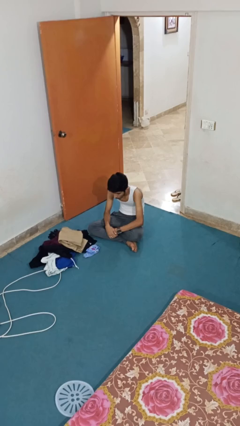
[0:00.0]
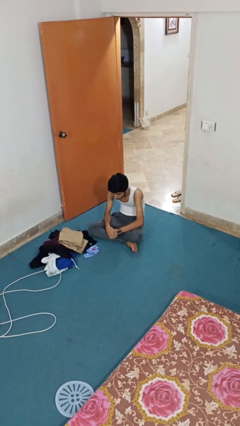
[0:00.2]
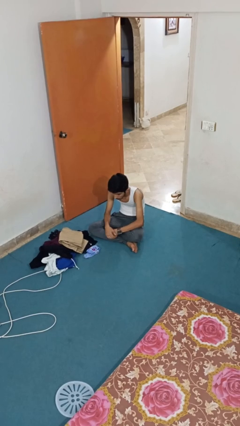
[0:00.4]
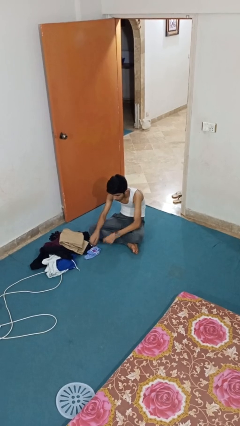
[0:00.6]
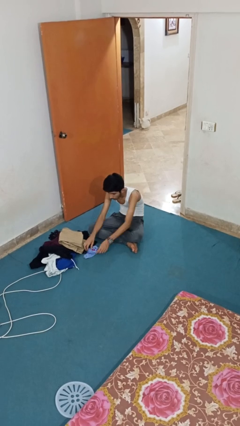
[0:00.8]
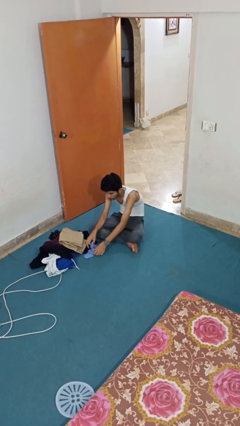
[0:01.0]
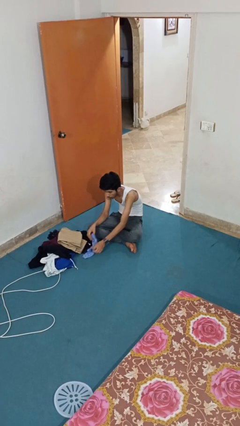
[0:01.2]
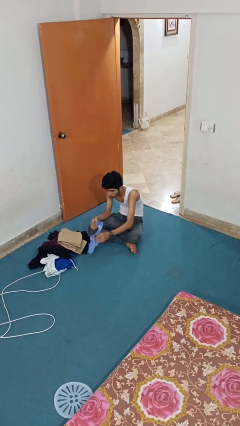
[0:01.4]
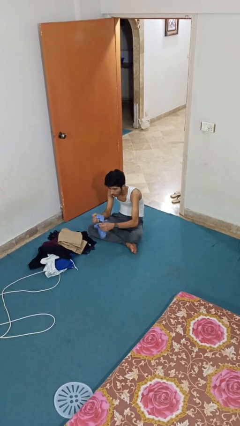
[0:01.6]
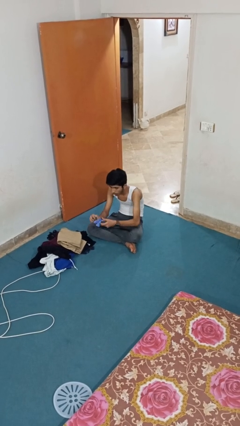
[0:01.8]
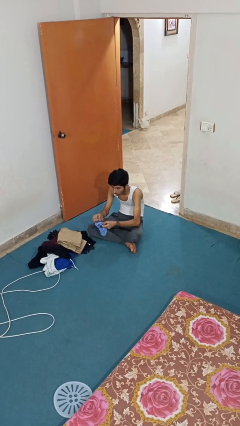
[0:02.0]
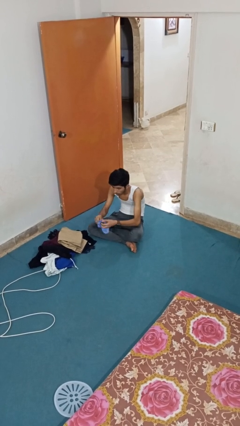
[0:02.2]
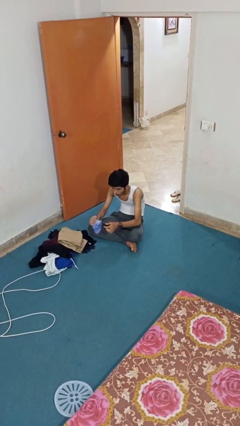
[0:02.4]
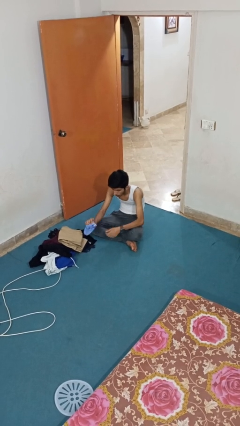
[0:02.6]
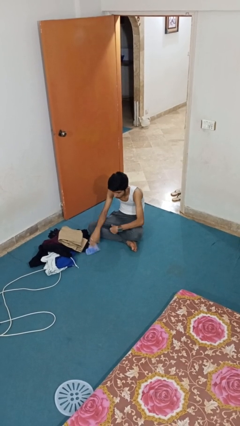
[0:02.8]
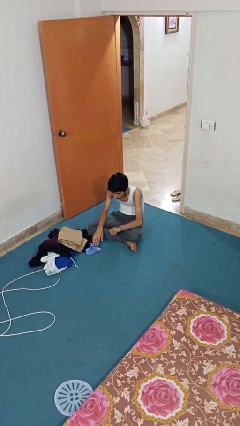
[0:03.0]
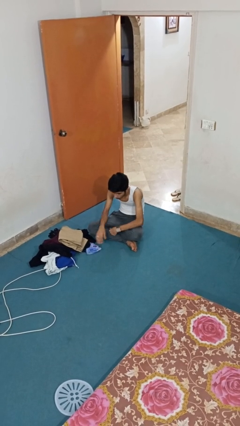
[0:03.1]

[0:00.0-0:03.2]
person folds socks

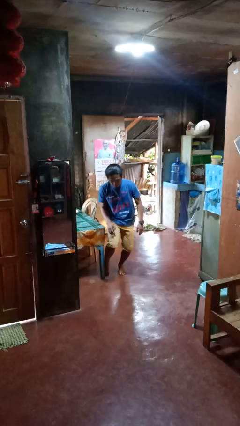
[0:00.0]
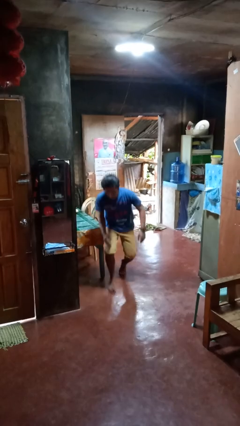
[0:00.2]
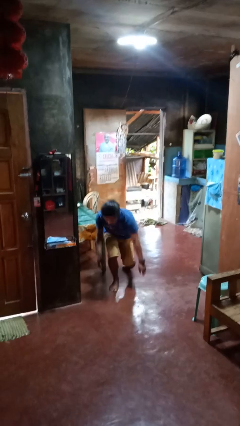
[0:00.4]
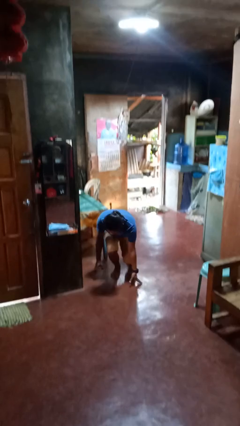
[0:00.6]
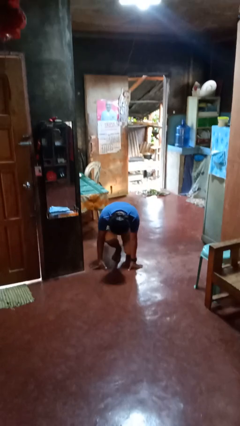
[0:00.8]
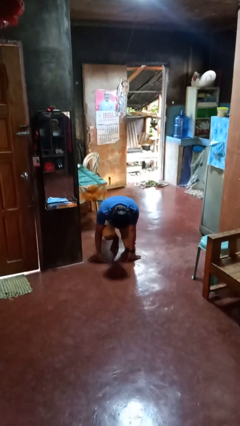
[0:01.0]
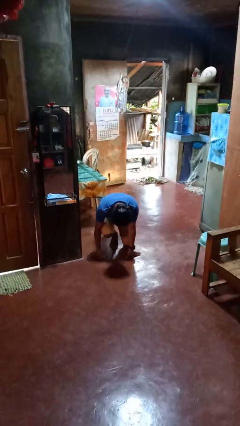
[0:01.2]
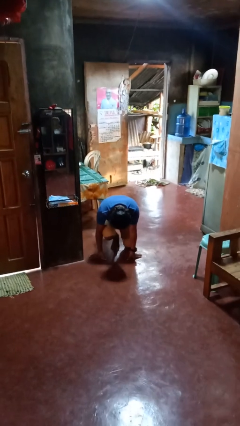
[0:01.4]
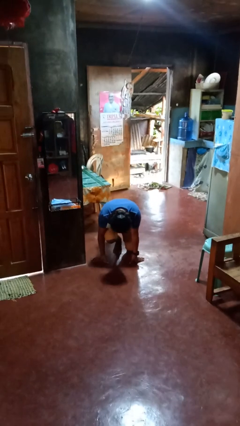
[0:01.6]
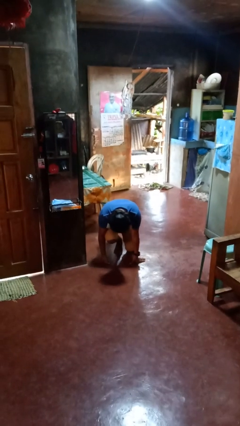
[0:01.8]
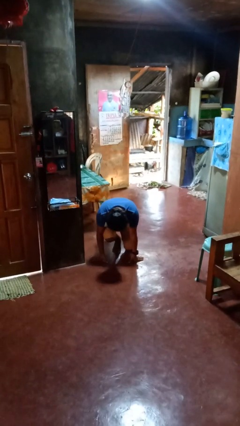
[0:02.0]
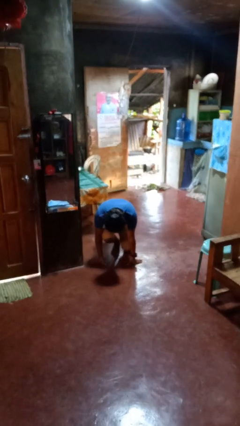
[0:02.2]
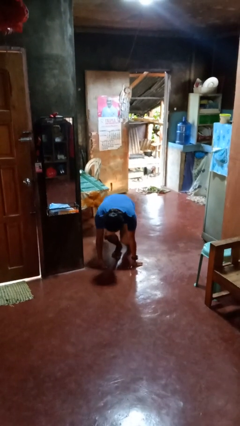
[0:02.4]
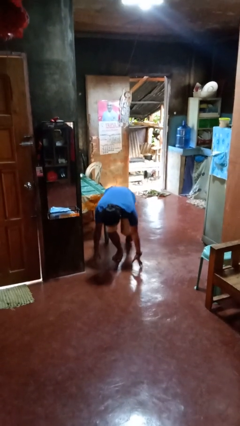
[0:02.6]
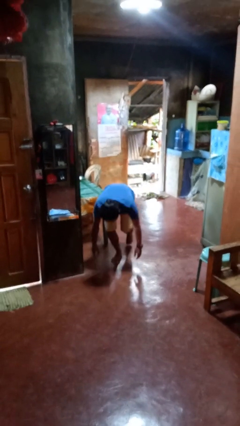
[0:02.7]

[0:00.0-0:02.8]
person trips on object on floor

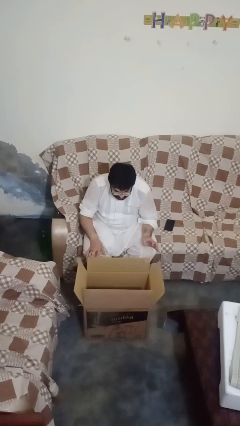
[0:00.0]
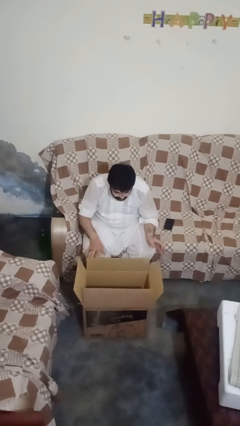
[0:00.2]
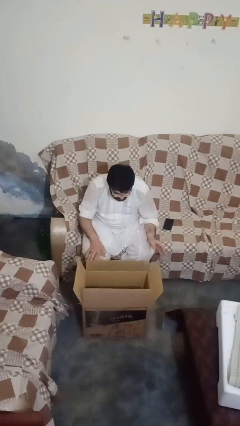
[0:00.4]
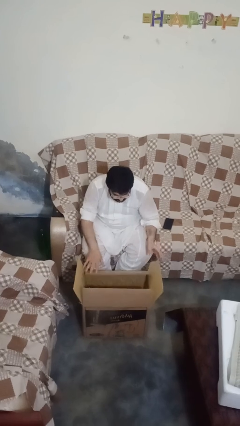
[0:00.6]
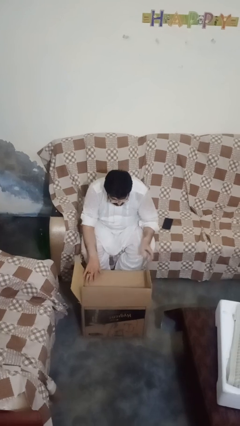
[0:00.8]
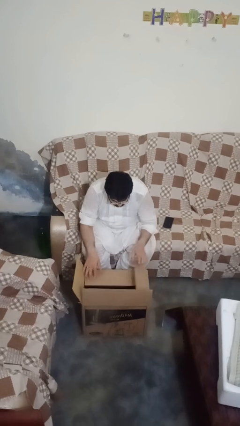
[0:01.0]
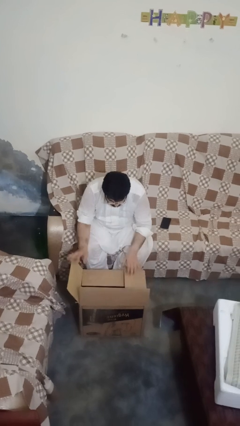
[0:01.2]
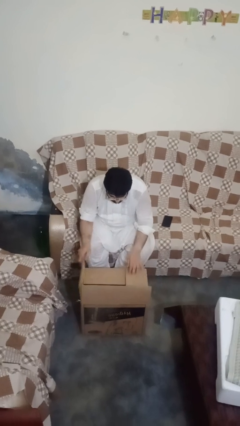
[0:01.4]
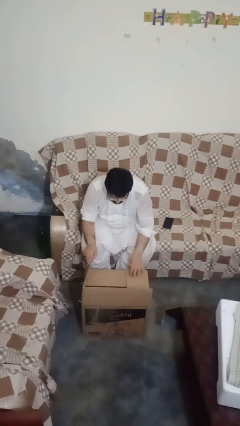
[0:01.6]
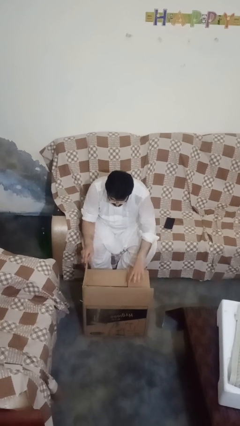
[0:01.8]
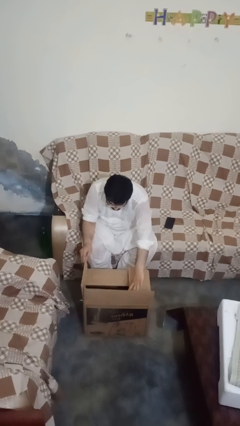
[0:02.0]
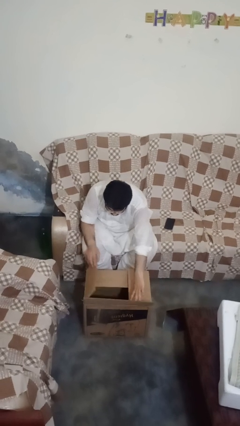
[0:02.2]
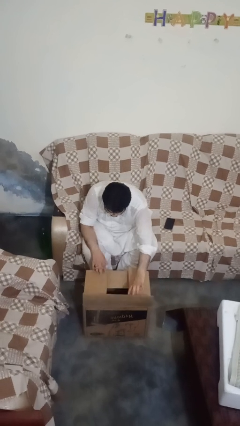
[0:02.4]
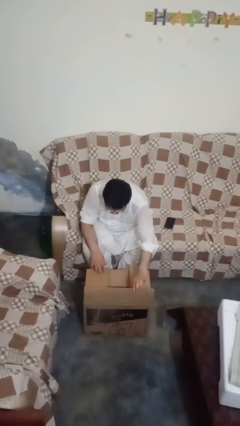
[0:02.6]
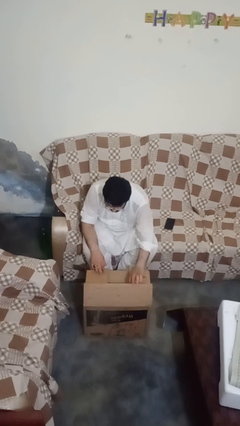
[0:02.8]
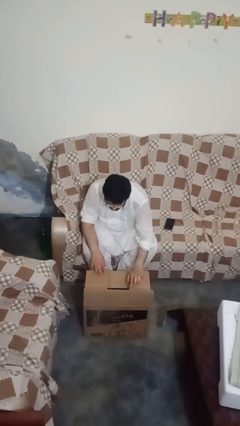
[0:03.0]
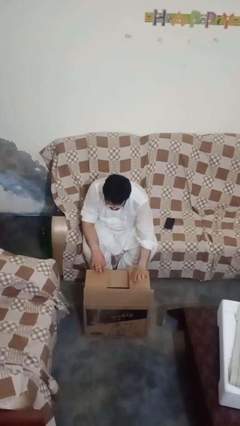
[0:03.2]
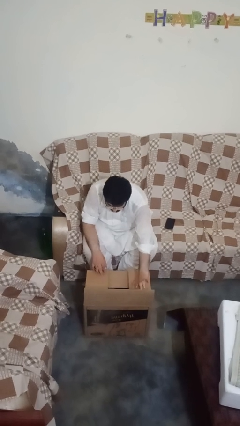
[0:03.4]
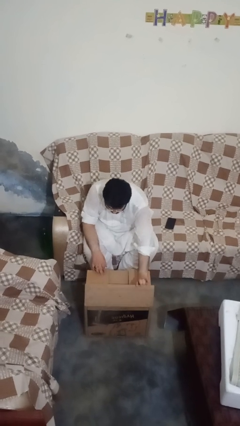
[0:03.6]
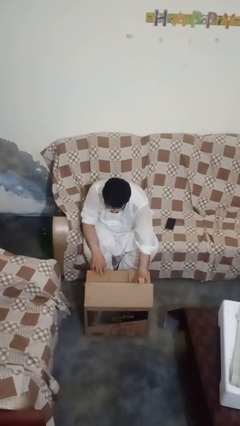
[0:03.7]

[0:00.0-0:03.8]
person closes box

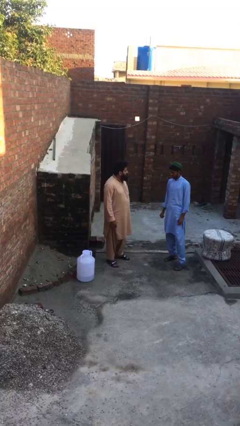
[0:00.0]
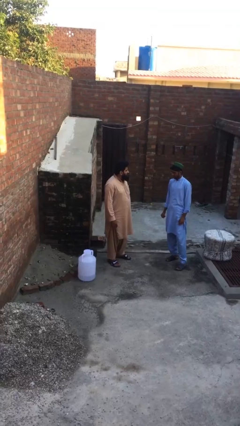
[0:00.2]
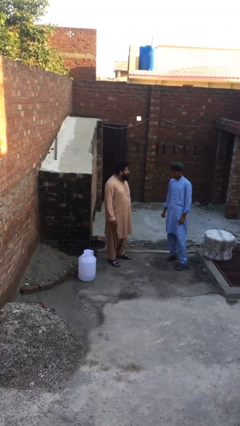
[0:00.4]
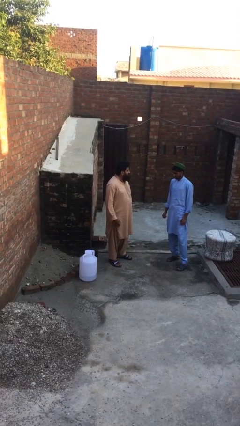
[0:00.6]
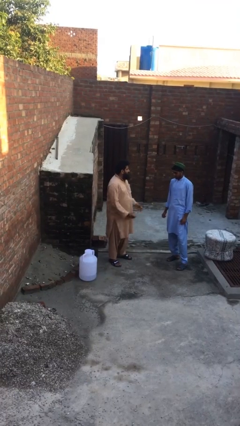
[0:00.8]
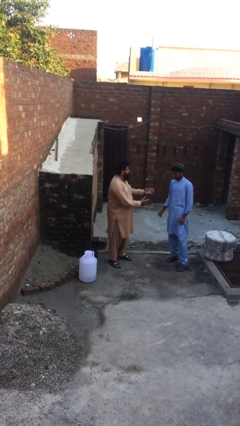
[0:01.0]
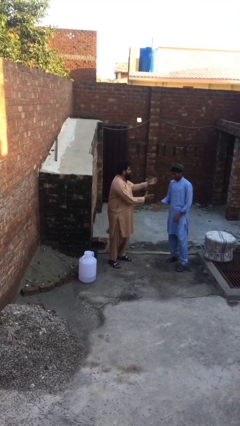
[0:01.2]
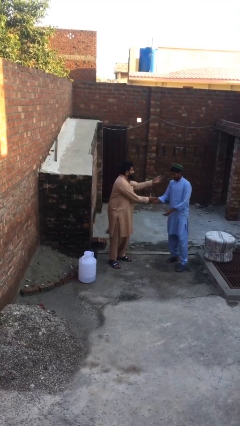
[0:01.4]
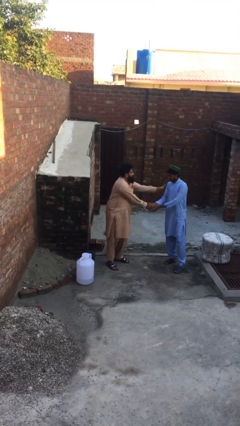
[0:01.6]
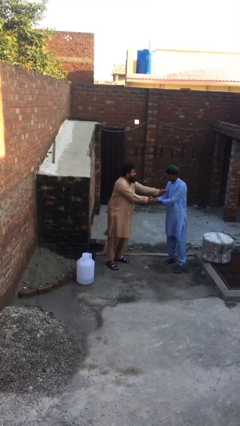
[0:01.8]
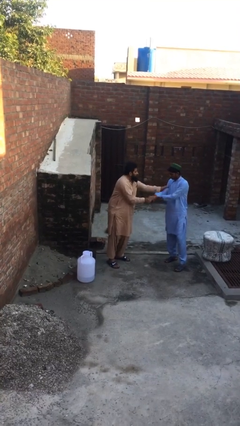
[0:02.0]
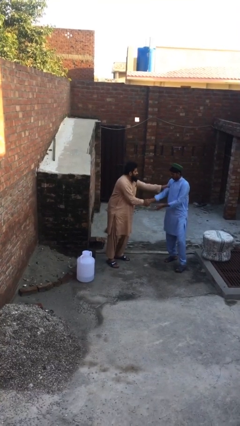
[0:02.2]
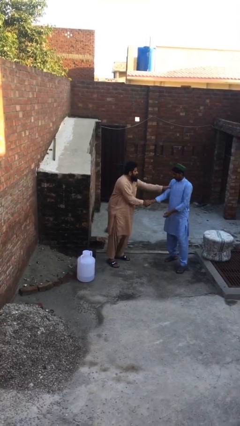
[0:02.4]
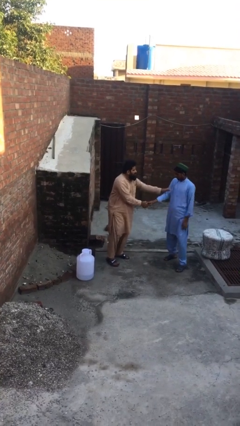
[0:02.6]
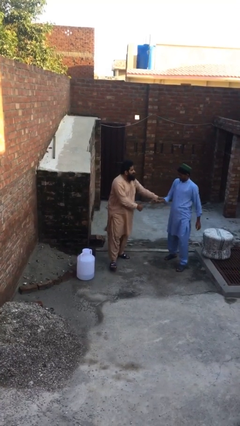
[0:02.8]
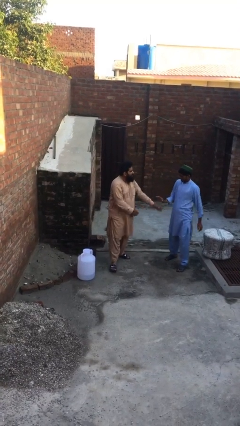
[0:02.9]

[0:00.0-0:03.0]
person shakes hand

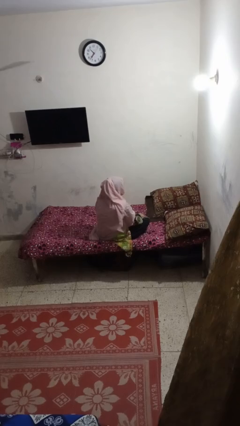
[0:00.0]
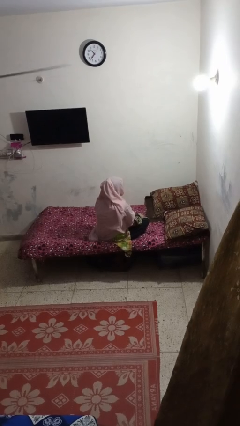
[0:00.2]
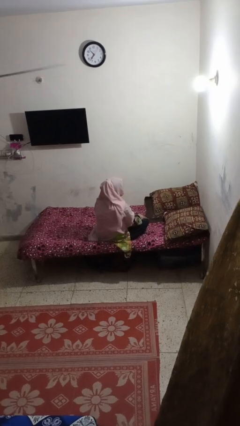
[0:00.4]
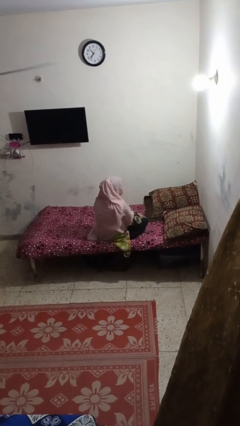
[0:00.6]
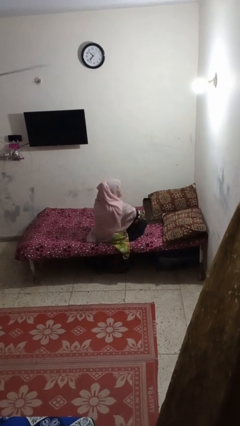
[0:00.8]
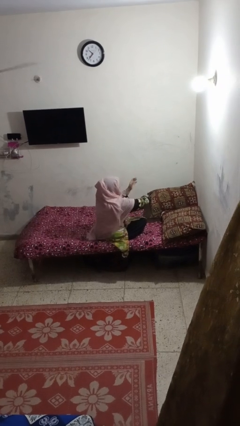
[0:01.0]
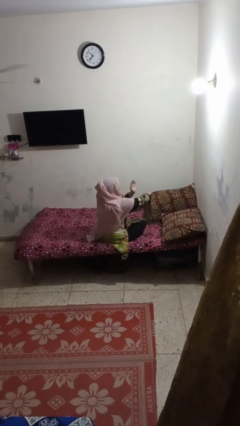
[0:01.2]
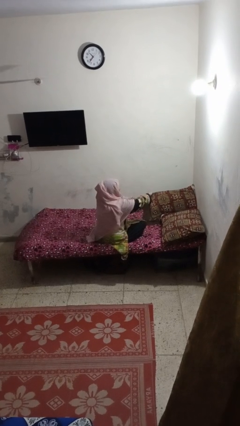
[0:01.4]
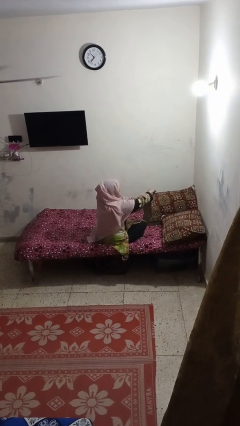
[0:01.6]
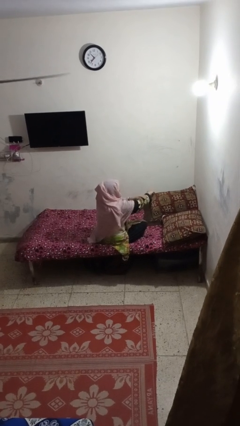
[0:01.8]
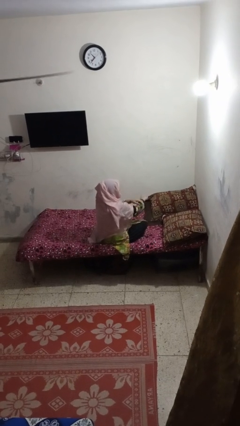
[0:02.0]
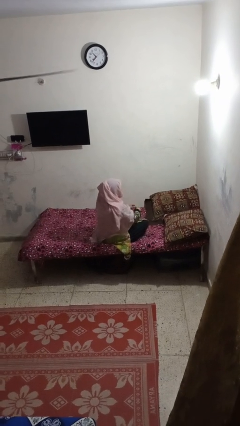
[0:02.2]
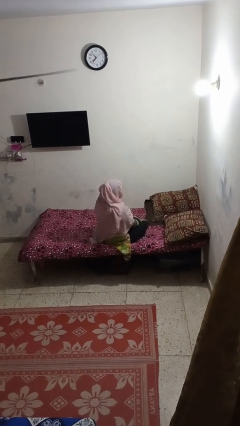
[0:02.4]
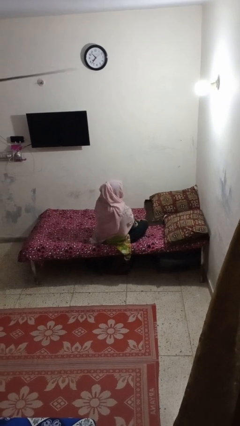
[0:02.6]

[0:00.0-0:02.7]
person swats bug

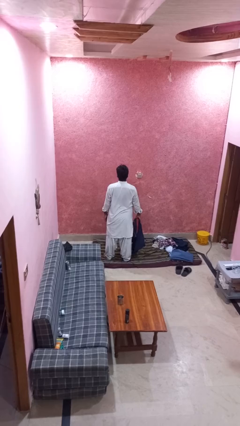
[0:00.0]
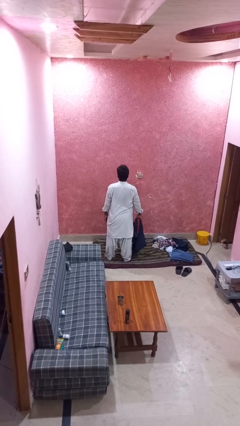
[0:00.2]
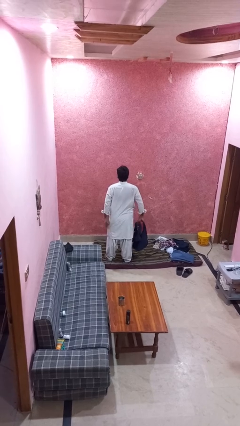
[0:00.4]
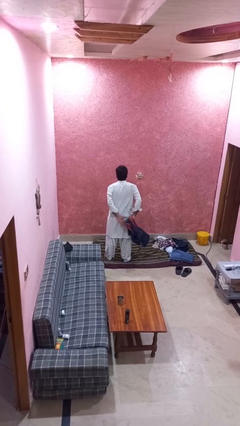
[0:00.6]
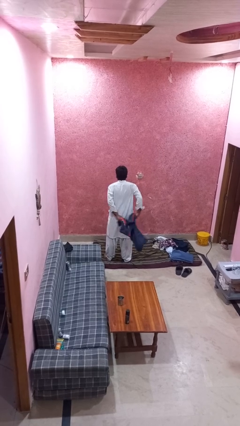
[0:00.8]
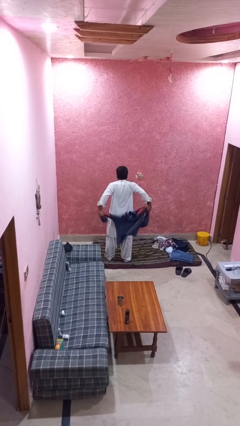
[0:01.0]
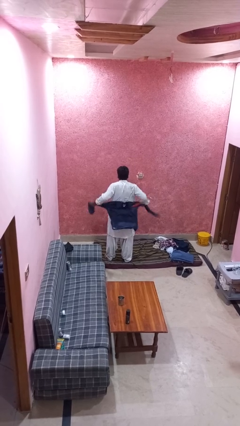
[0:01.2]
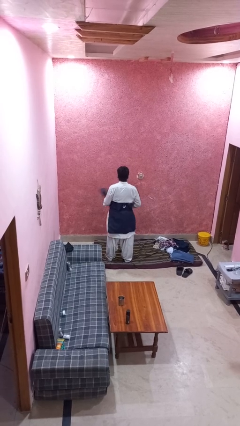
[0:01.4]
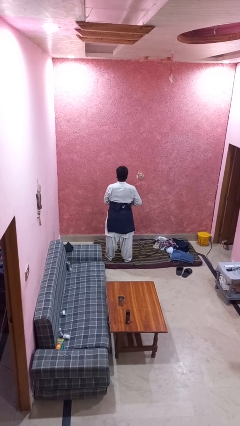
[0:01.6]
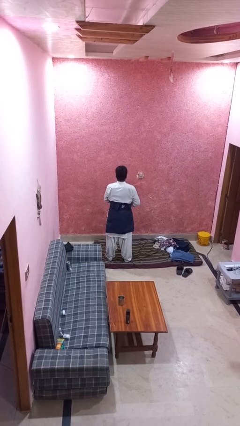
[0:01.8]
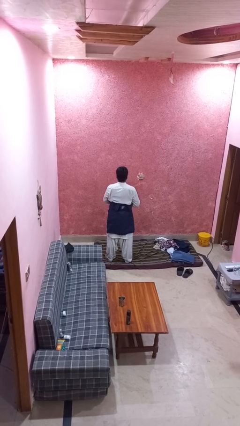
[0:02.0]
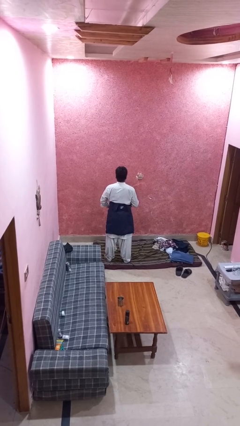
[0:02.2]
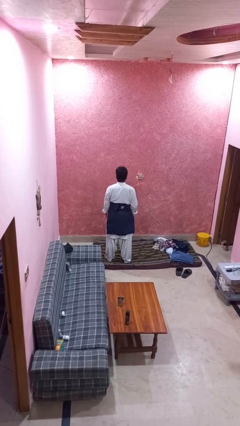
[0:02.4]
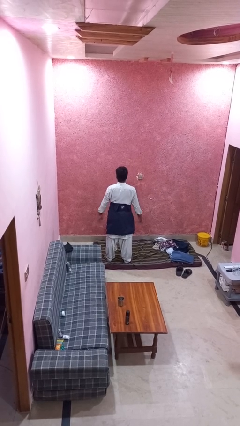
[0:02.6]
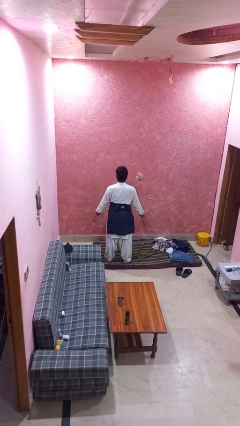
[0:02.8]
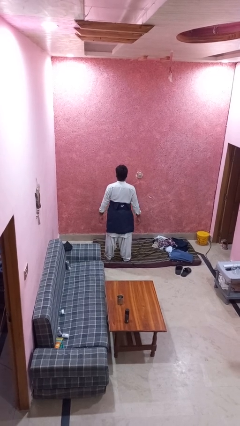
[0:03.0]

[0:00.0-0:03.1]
person ties jacket around waist
